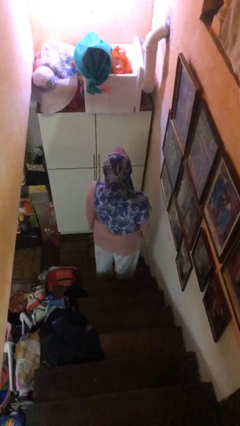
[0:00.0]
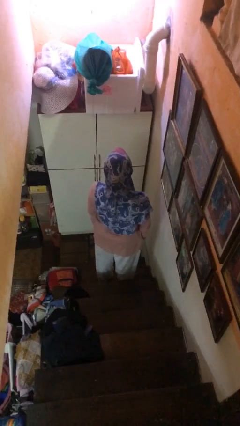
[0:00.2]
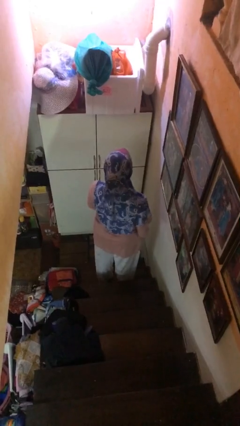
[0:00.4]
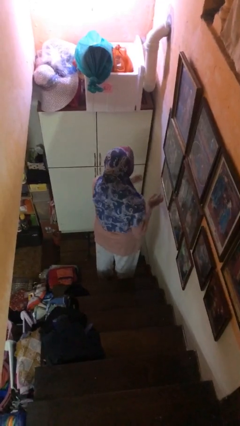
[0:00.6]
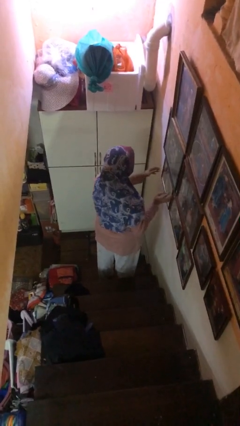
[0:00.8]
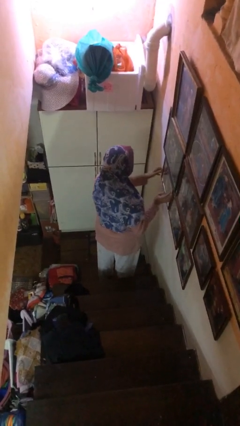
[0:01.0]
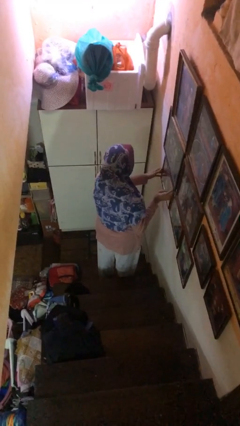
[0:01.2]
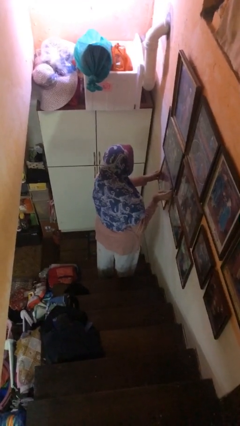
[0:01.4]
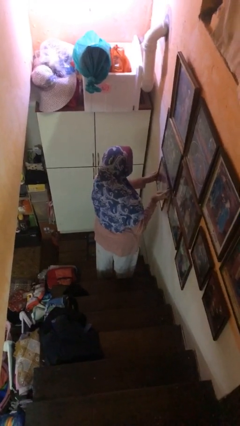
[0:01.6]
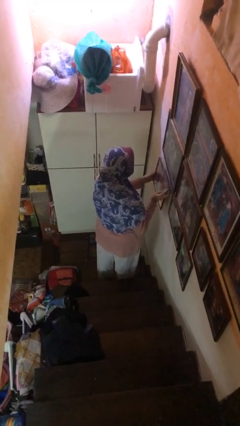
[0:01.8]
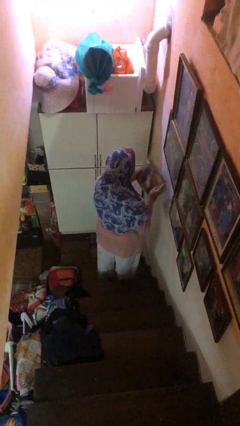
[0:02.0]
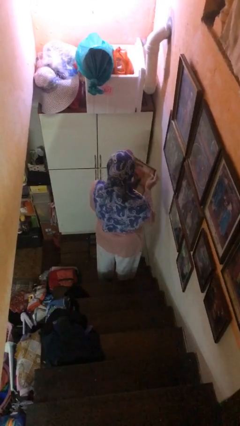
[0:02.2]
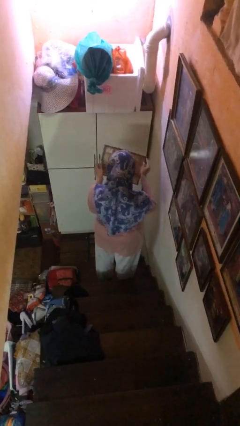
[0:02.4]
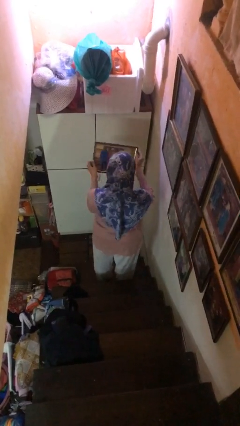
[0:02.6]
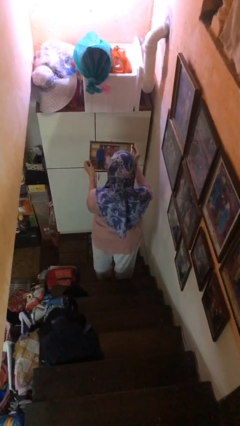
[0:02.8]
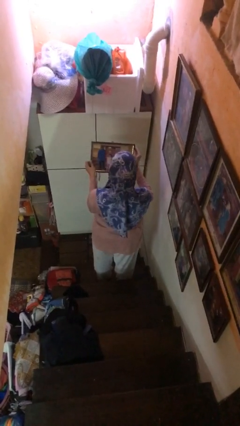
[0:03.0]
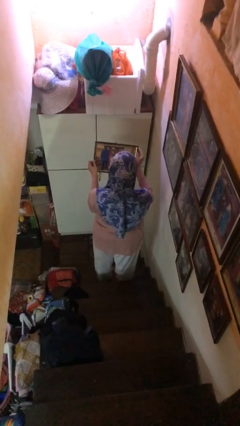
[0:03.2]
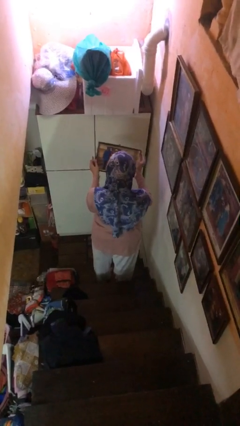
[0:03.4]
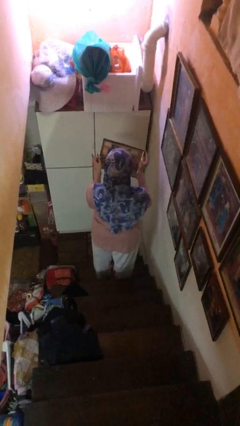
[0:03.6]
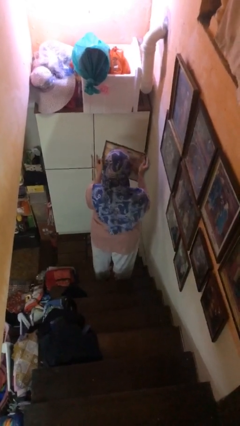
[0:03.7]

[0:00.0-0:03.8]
person puts up picture frame

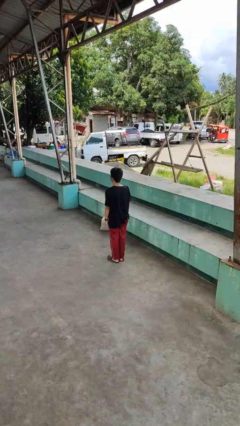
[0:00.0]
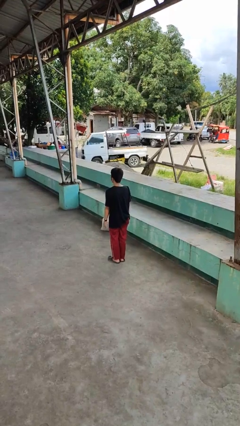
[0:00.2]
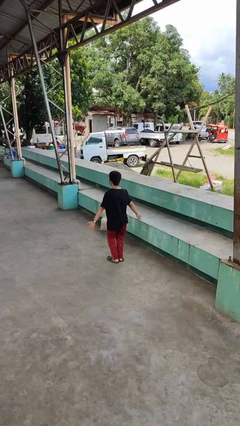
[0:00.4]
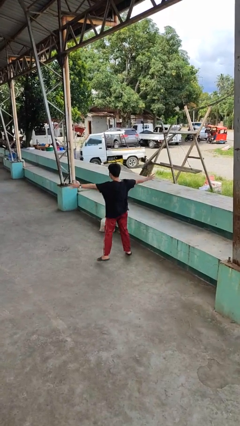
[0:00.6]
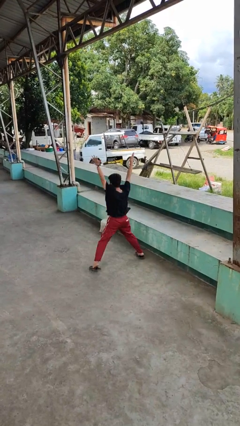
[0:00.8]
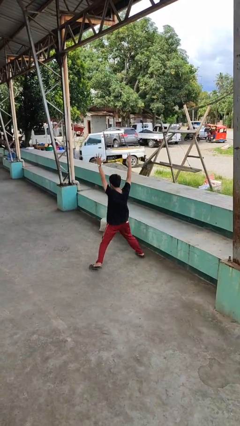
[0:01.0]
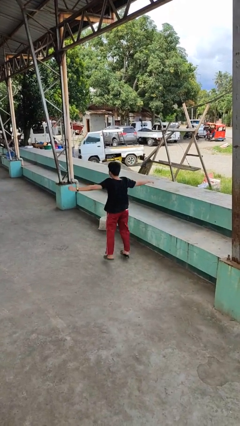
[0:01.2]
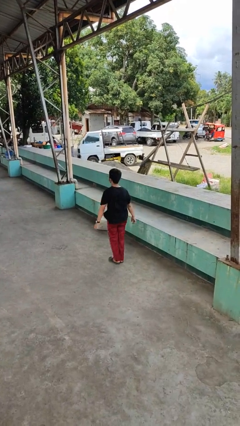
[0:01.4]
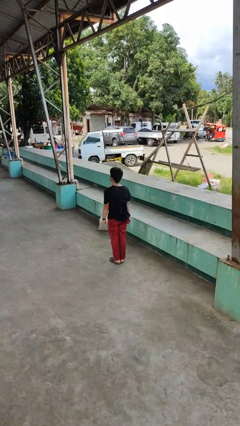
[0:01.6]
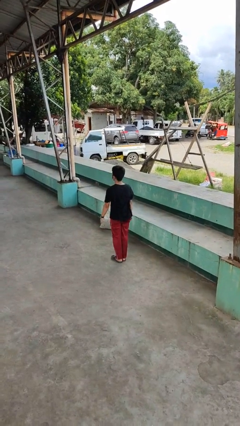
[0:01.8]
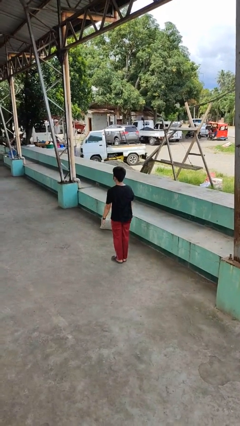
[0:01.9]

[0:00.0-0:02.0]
person exercises with jumping jacks

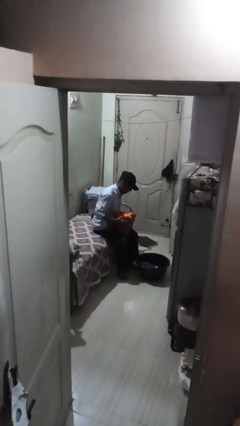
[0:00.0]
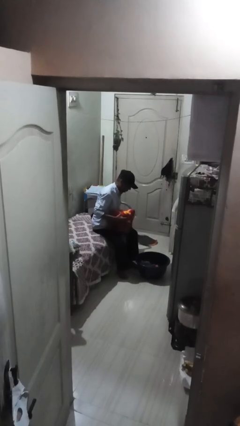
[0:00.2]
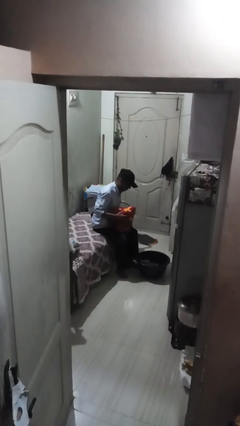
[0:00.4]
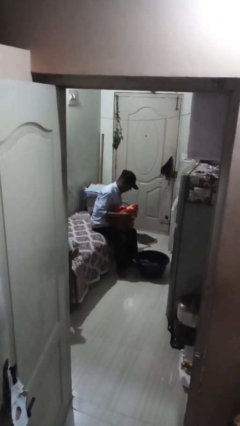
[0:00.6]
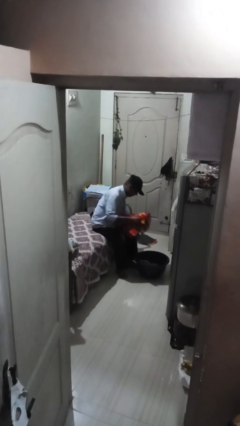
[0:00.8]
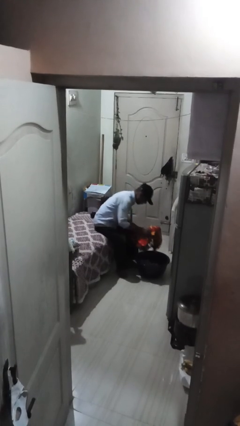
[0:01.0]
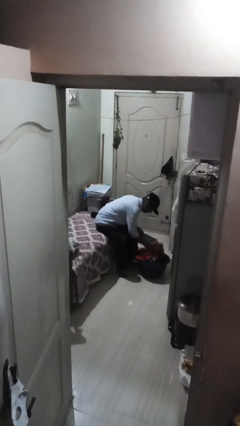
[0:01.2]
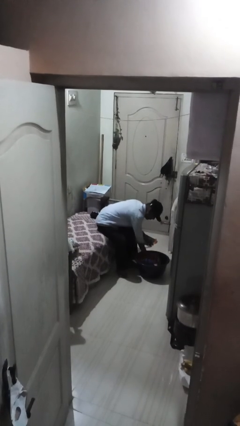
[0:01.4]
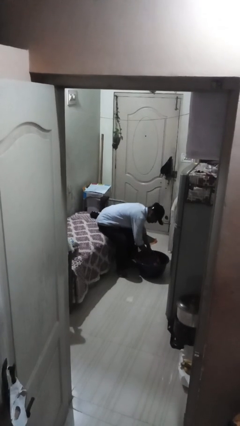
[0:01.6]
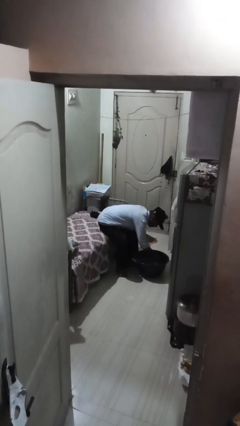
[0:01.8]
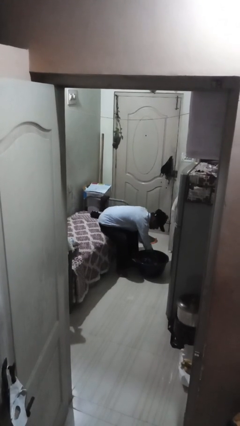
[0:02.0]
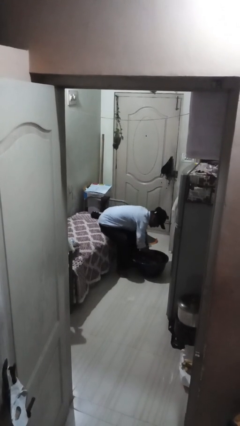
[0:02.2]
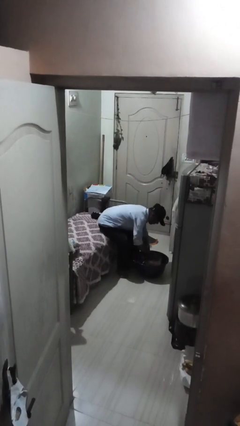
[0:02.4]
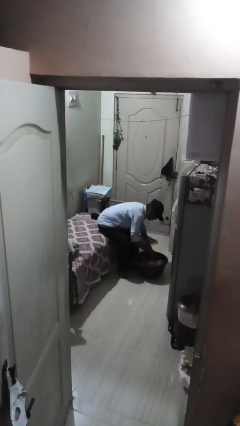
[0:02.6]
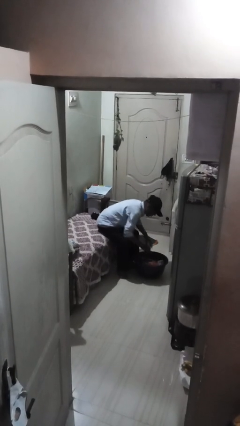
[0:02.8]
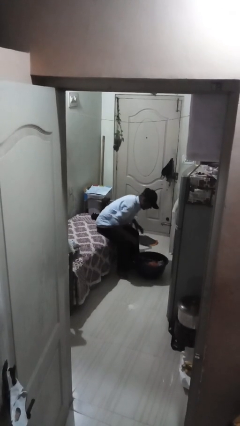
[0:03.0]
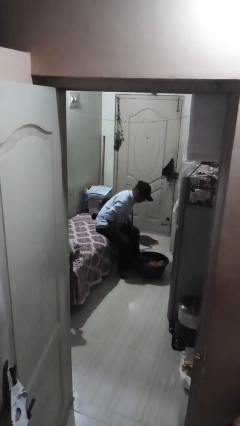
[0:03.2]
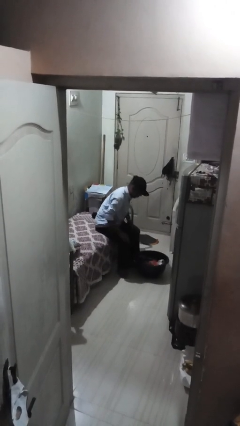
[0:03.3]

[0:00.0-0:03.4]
person puts object into basket

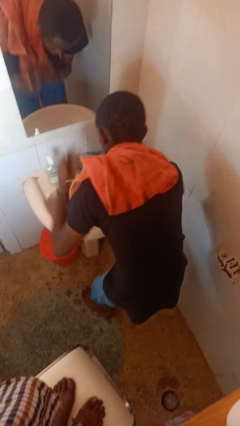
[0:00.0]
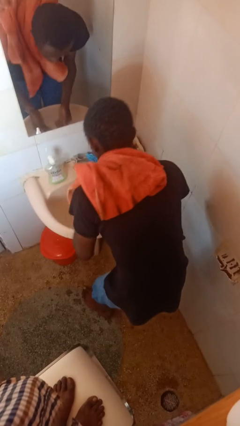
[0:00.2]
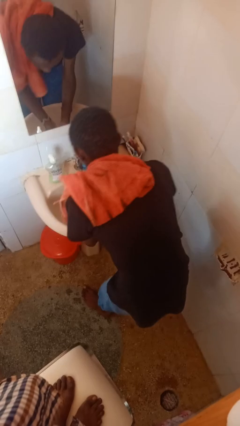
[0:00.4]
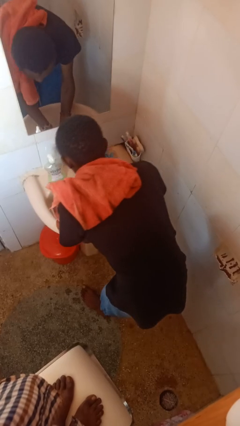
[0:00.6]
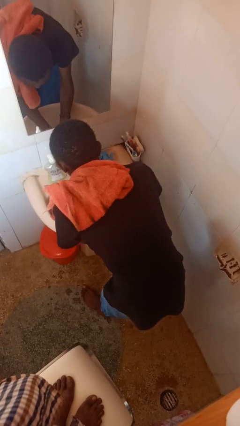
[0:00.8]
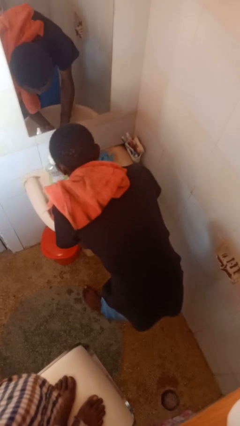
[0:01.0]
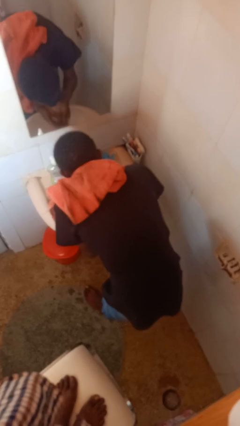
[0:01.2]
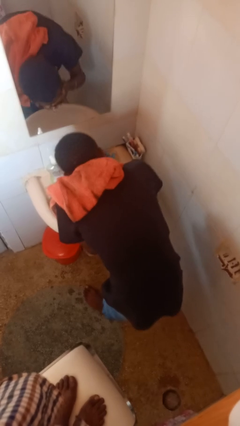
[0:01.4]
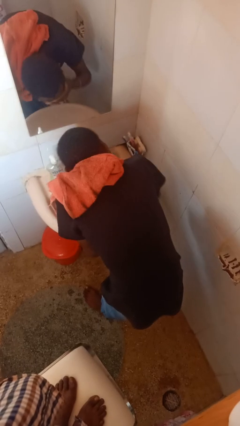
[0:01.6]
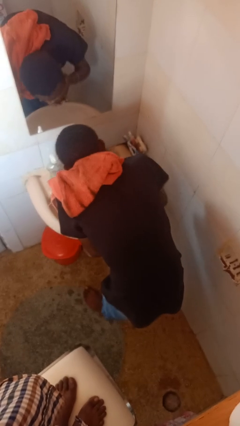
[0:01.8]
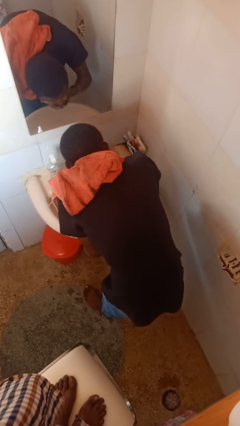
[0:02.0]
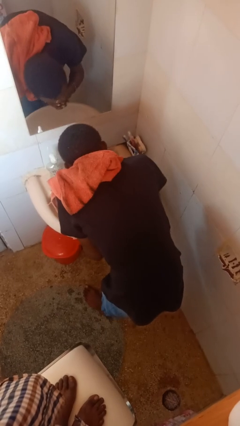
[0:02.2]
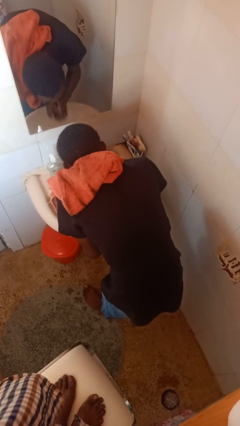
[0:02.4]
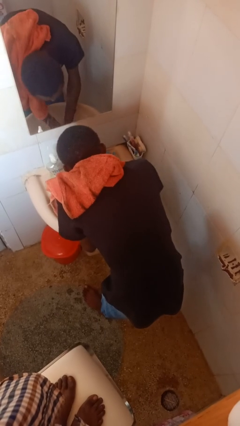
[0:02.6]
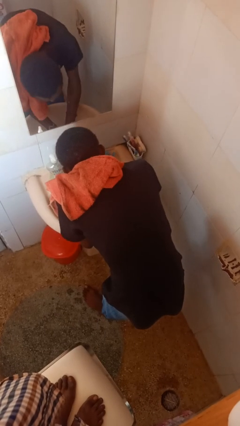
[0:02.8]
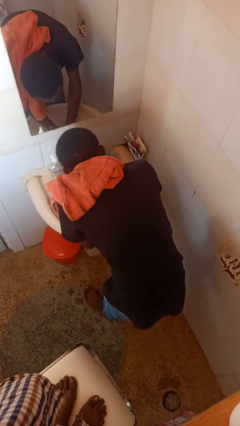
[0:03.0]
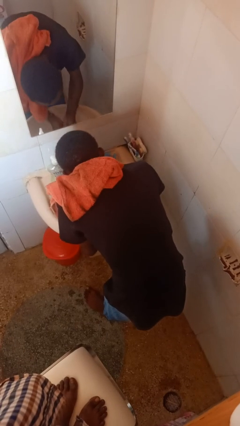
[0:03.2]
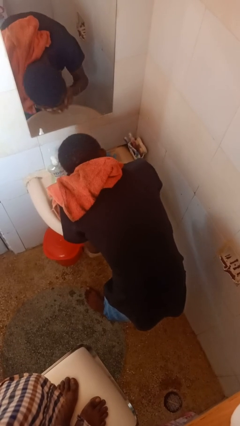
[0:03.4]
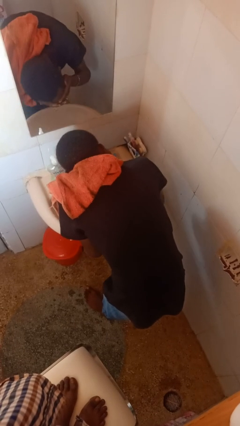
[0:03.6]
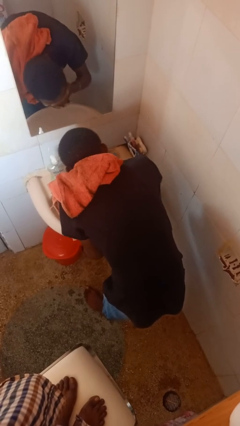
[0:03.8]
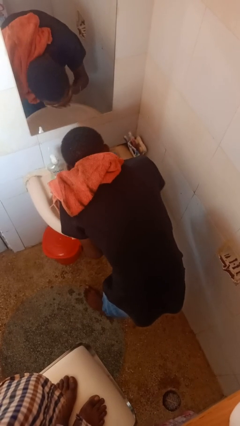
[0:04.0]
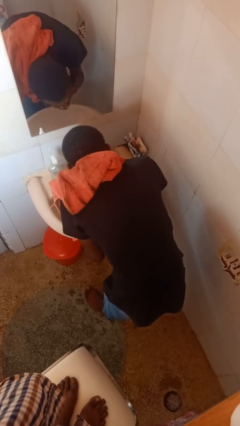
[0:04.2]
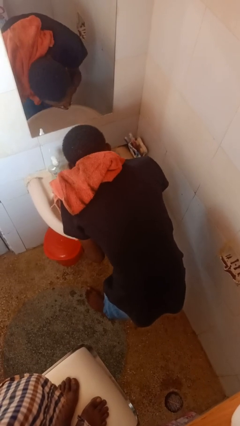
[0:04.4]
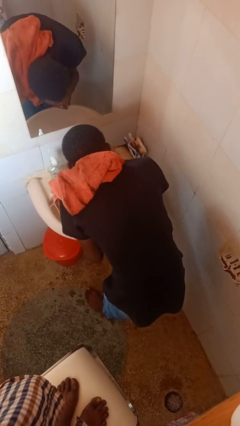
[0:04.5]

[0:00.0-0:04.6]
person washes face

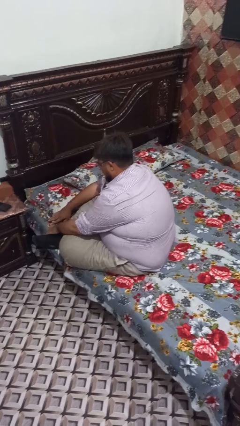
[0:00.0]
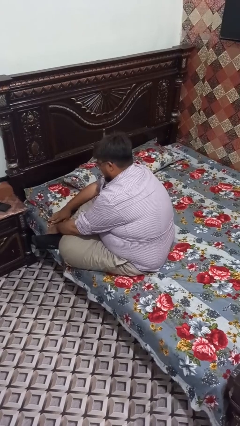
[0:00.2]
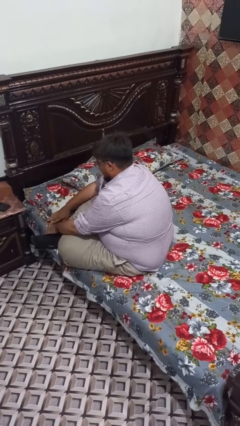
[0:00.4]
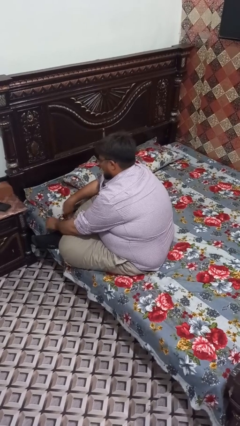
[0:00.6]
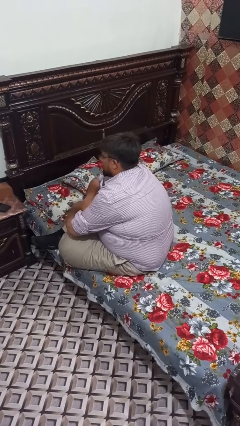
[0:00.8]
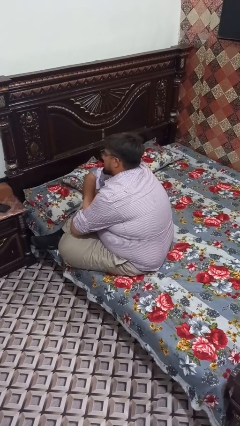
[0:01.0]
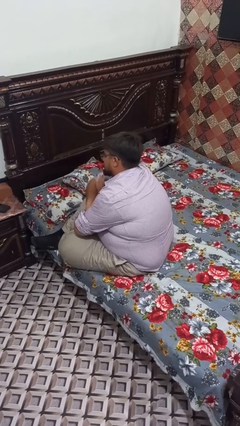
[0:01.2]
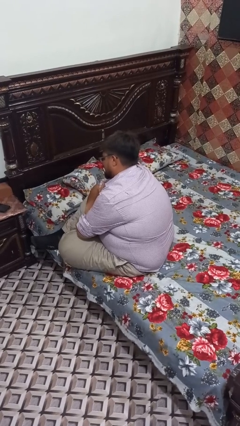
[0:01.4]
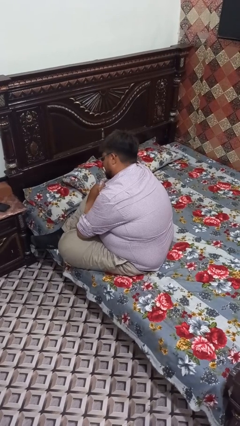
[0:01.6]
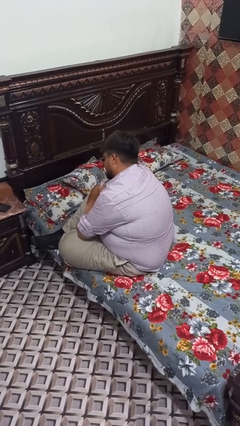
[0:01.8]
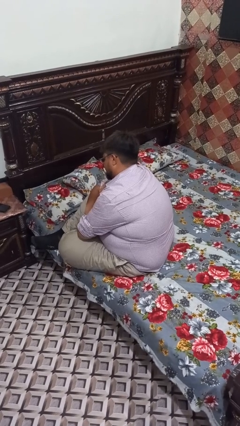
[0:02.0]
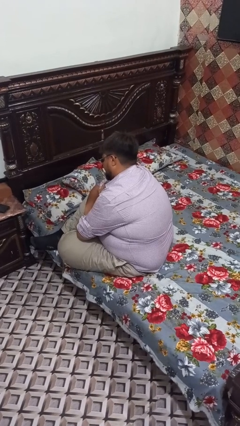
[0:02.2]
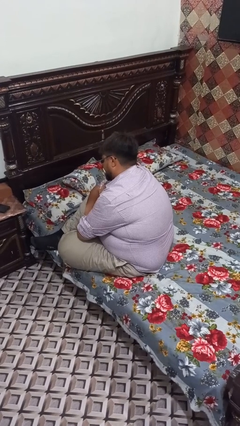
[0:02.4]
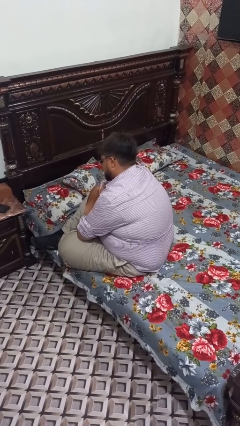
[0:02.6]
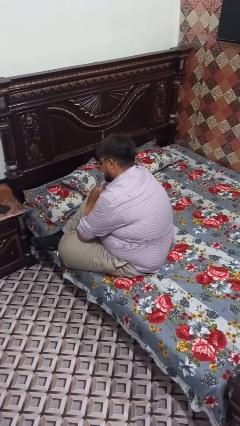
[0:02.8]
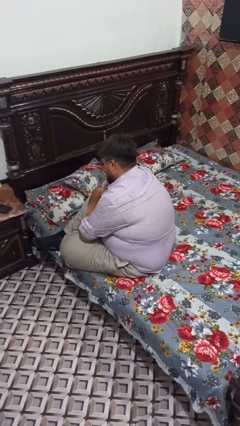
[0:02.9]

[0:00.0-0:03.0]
person crosses arms

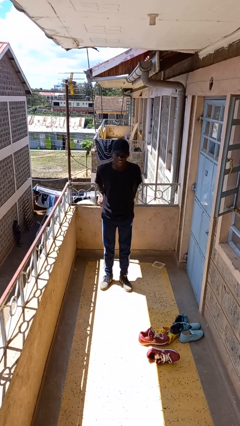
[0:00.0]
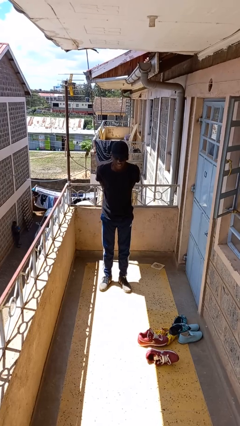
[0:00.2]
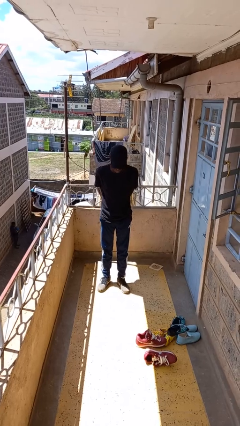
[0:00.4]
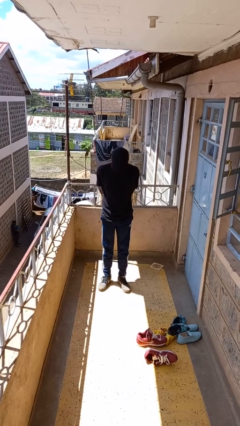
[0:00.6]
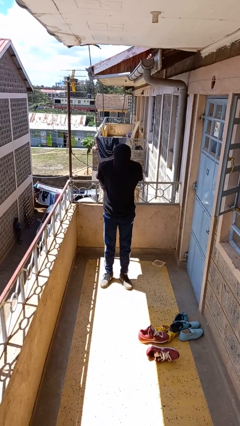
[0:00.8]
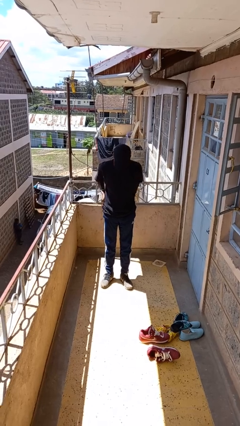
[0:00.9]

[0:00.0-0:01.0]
person puts hands in back pockets
